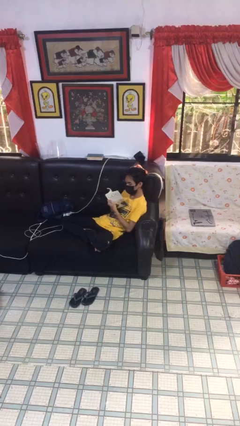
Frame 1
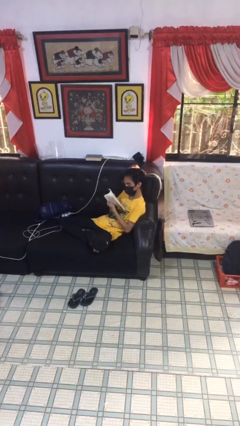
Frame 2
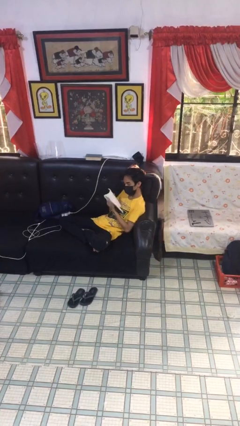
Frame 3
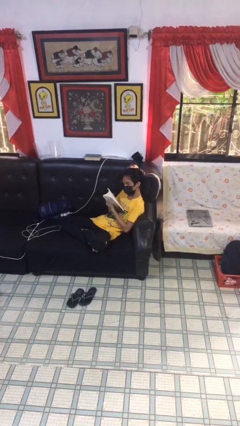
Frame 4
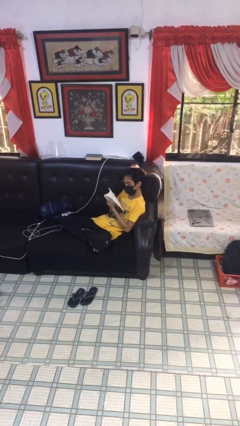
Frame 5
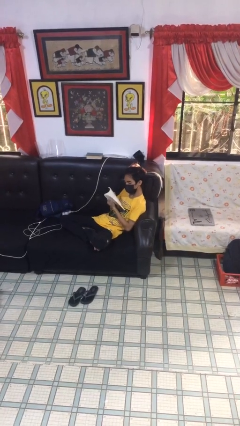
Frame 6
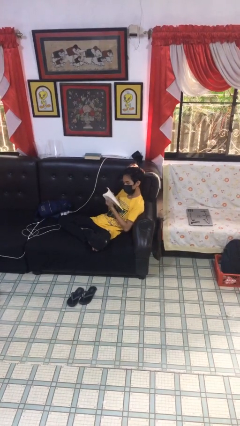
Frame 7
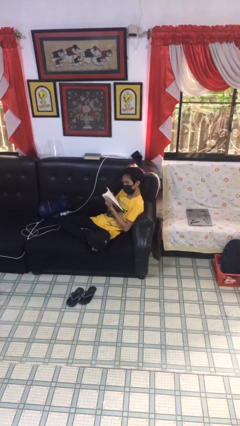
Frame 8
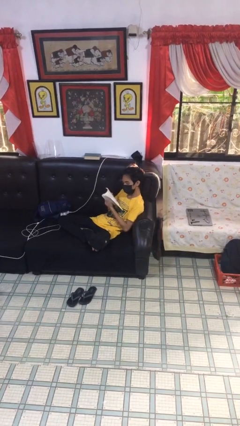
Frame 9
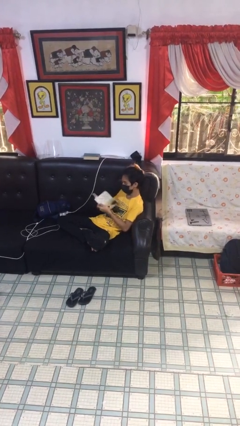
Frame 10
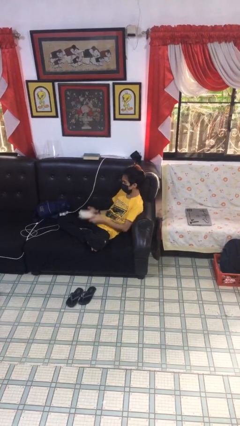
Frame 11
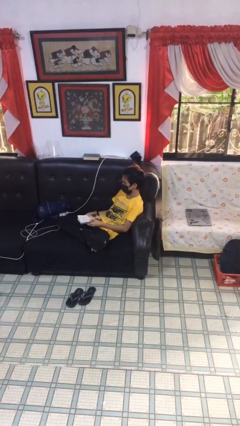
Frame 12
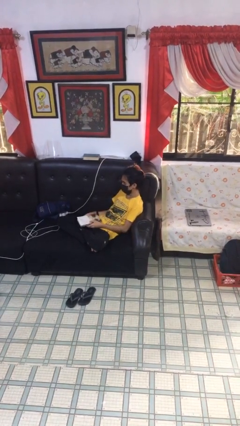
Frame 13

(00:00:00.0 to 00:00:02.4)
person reads document

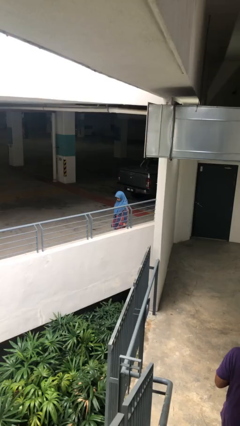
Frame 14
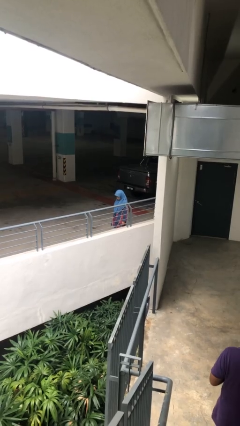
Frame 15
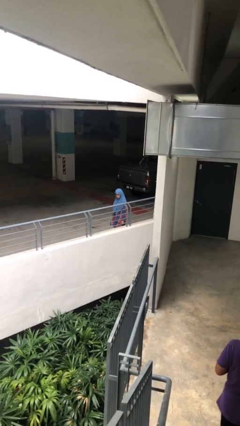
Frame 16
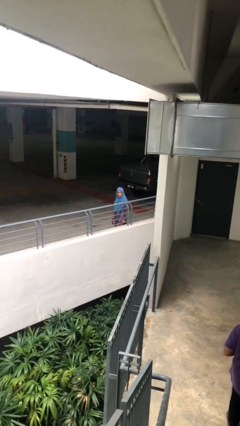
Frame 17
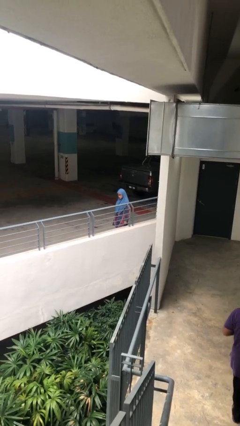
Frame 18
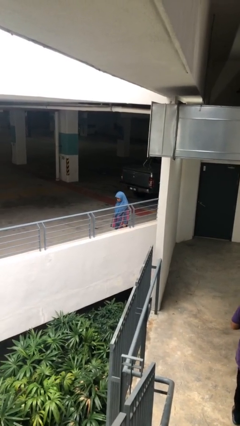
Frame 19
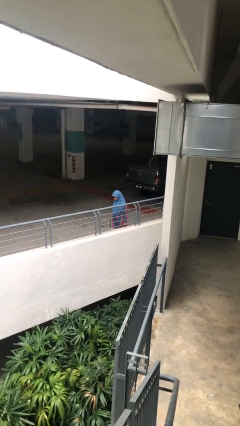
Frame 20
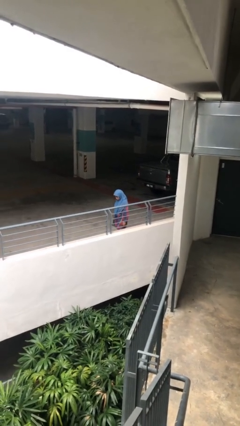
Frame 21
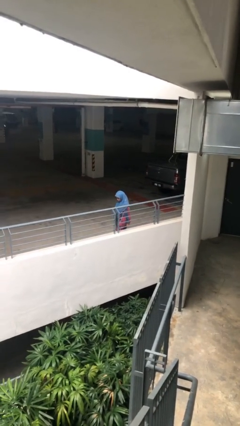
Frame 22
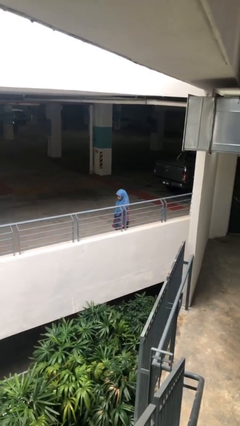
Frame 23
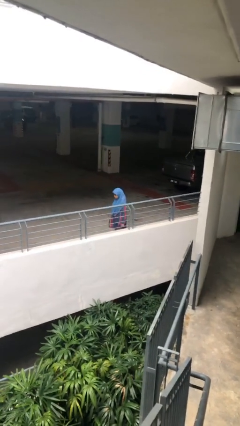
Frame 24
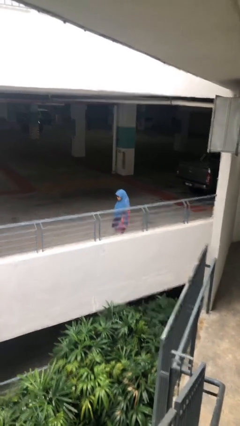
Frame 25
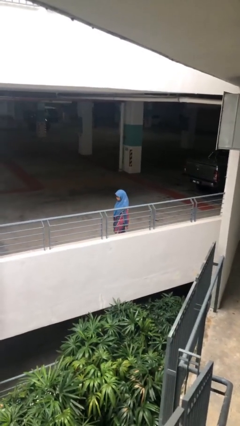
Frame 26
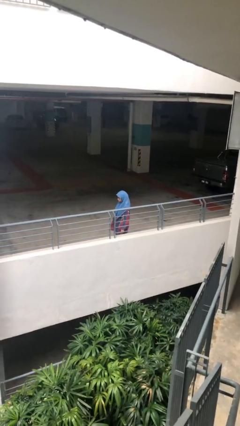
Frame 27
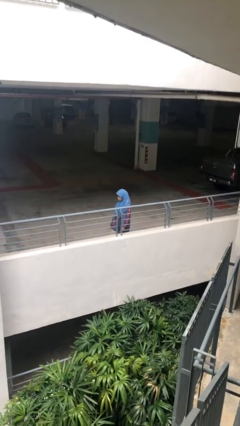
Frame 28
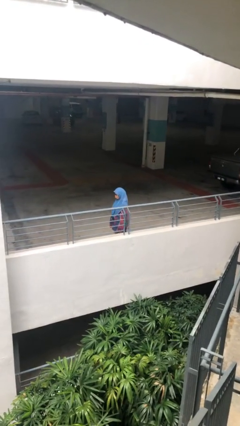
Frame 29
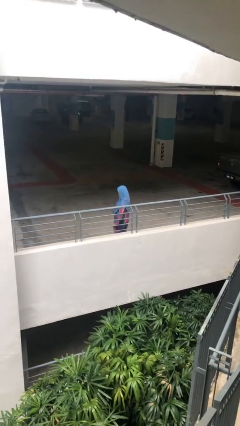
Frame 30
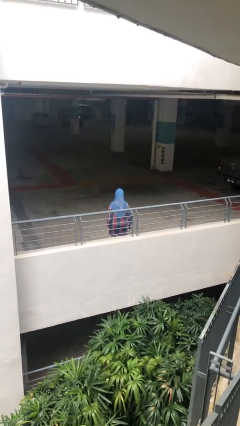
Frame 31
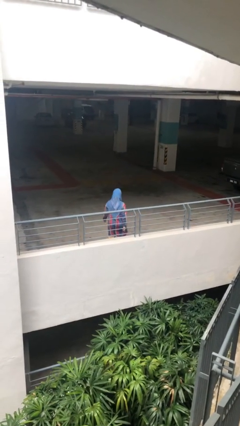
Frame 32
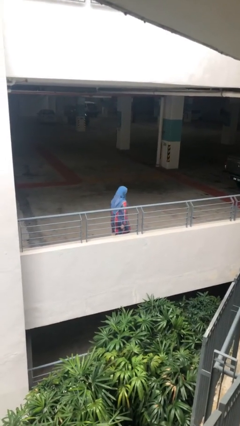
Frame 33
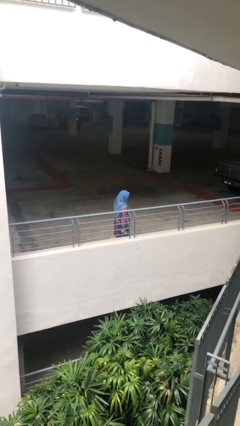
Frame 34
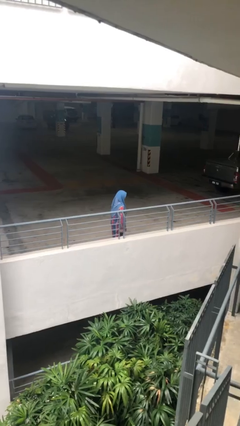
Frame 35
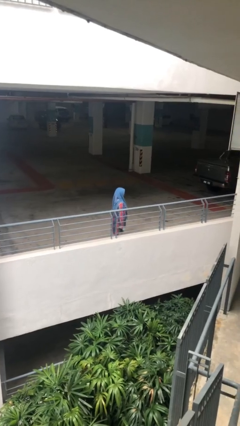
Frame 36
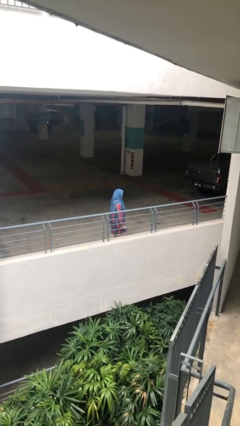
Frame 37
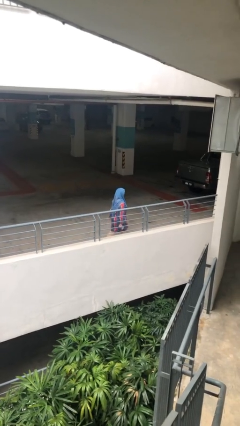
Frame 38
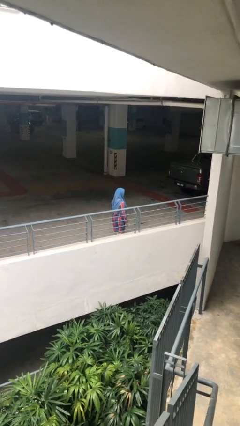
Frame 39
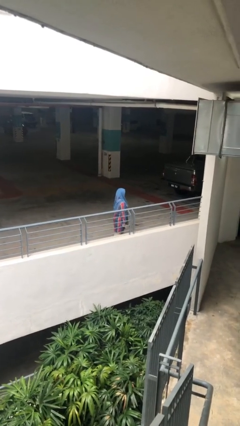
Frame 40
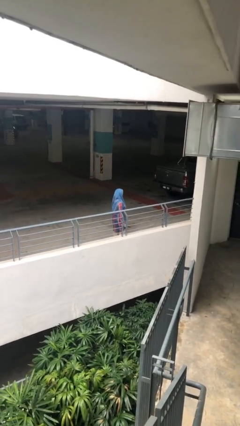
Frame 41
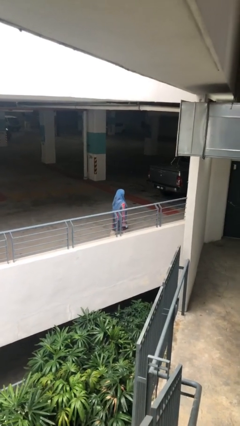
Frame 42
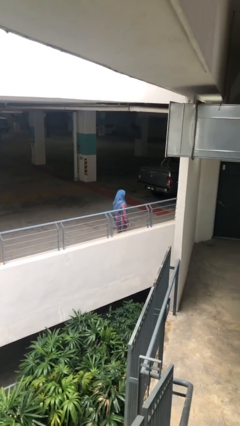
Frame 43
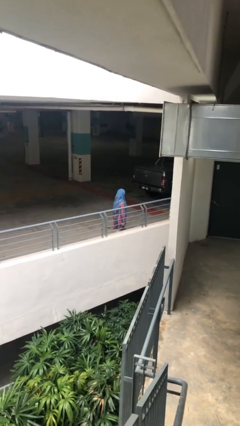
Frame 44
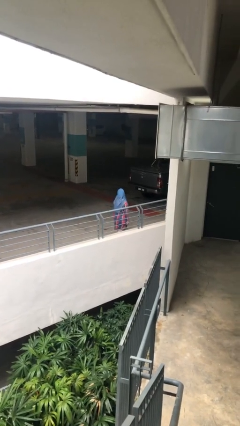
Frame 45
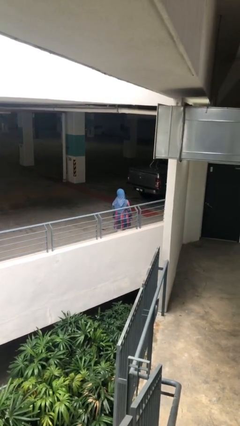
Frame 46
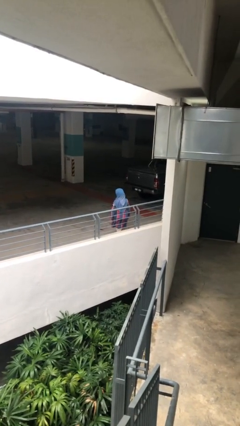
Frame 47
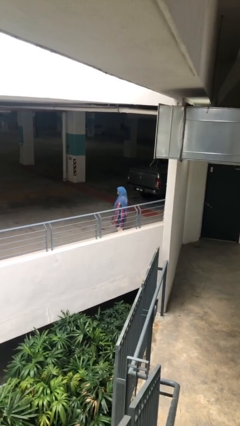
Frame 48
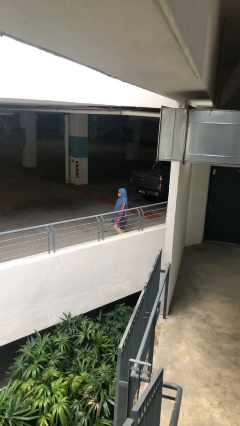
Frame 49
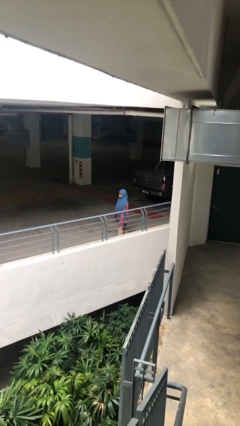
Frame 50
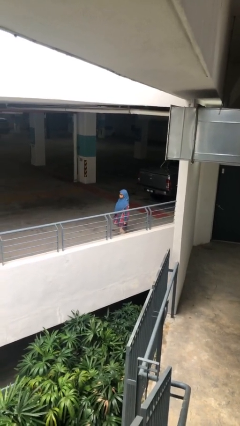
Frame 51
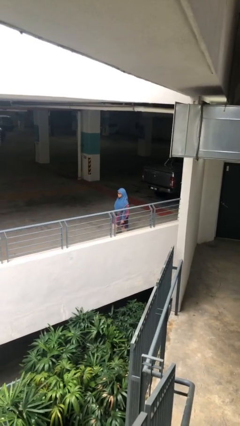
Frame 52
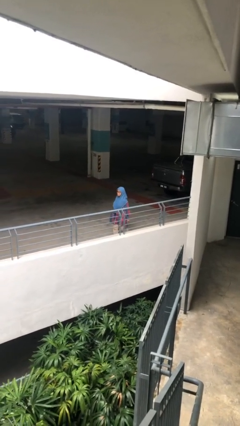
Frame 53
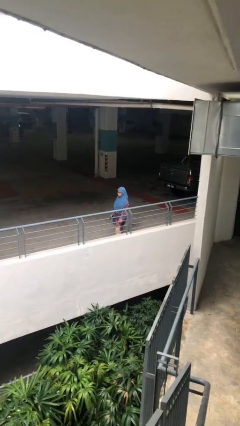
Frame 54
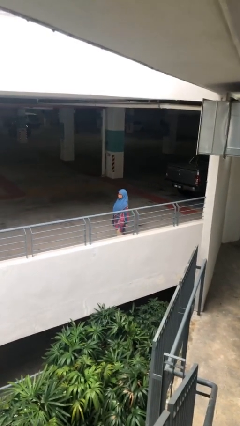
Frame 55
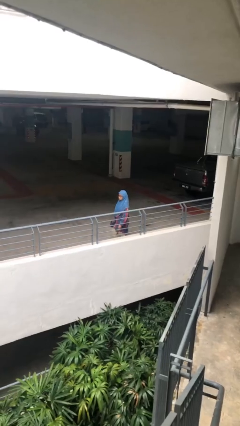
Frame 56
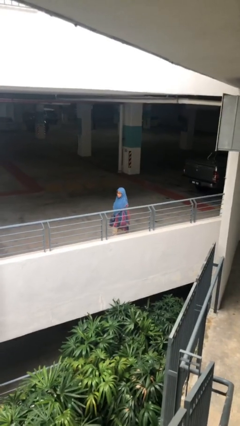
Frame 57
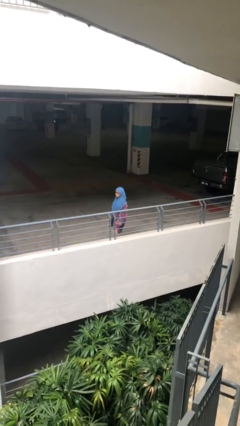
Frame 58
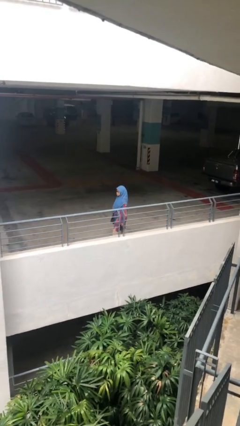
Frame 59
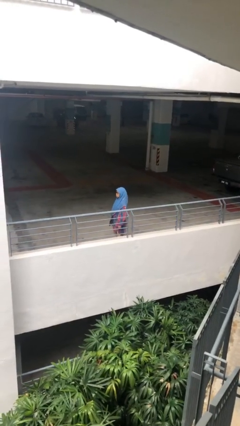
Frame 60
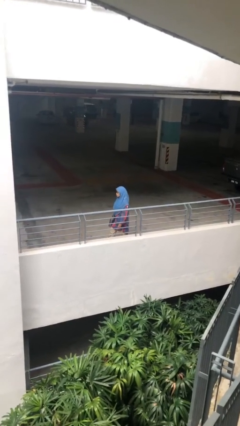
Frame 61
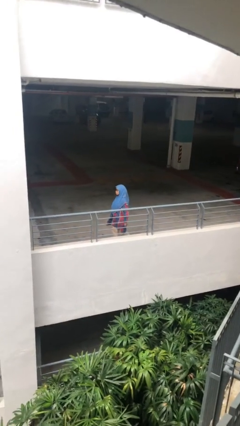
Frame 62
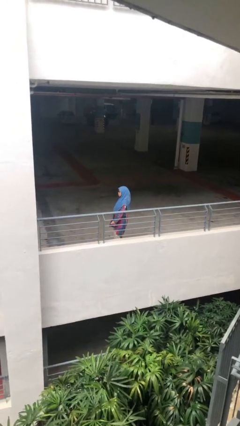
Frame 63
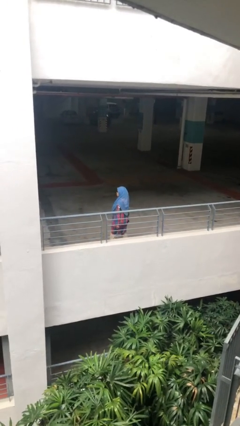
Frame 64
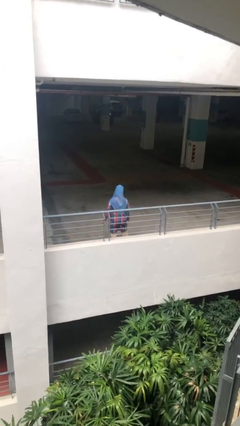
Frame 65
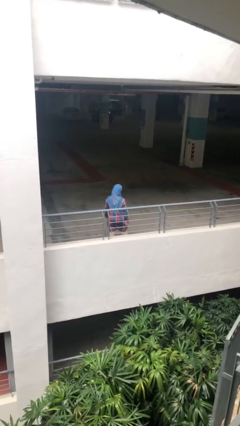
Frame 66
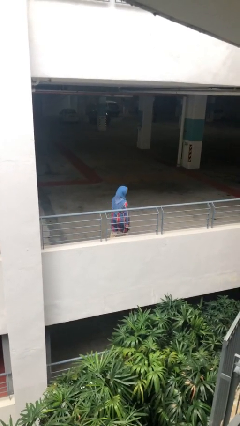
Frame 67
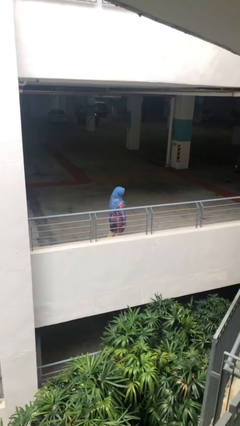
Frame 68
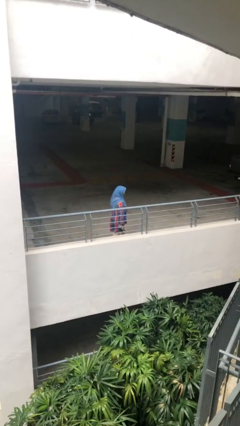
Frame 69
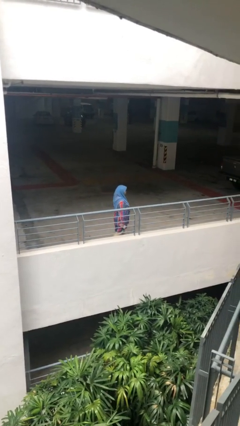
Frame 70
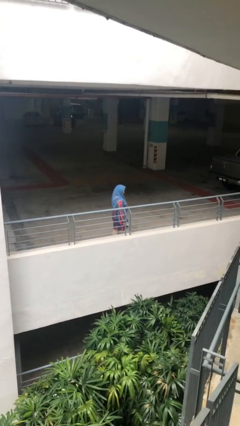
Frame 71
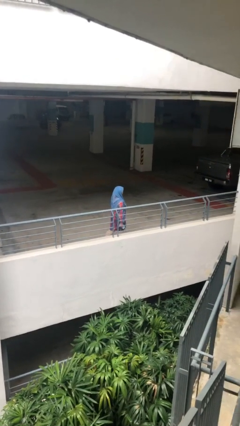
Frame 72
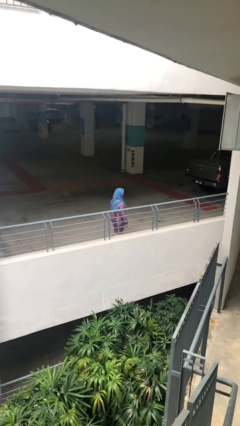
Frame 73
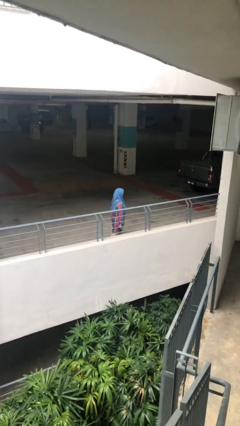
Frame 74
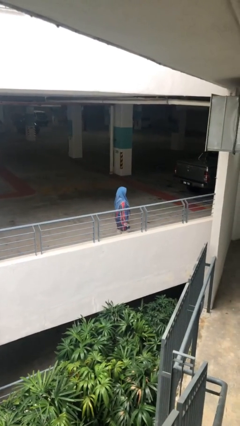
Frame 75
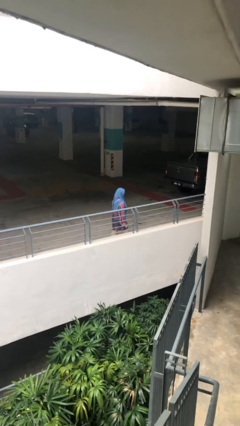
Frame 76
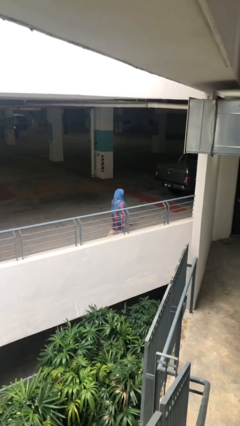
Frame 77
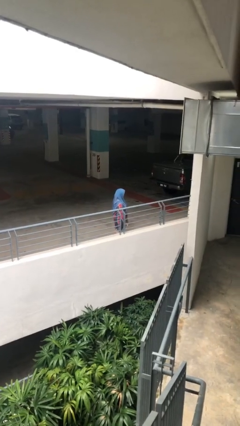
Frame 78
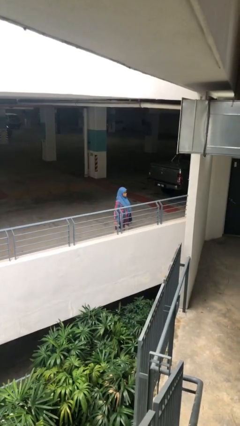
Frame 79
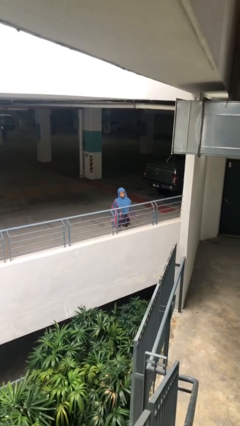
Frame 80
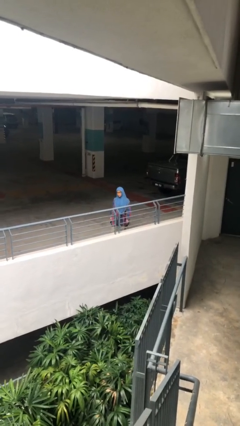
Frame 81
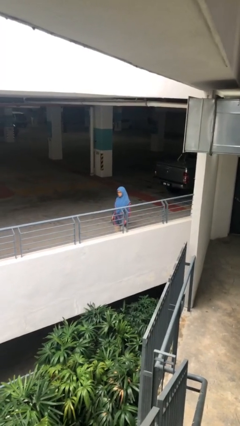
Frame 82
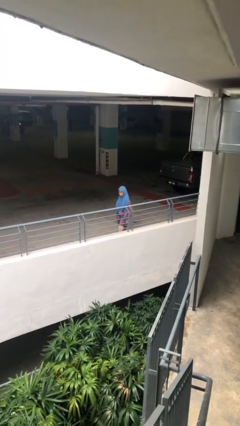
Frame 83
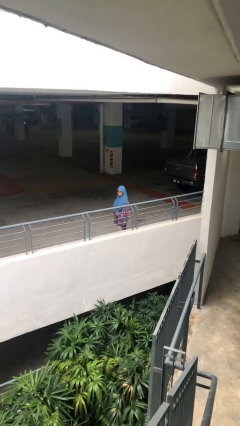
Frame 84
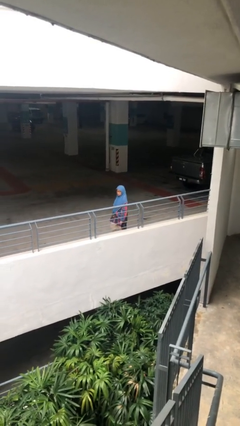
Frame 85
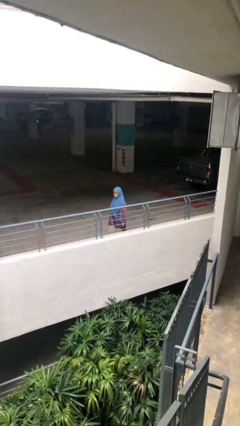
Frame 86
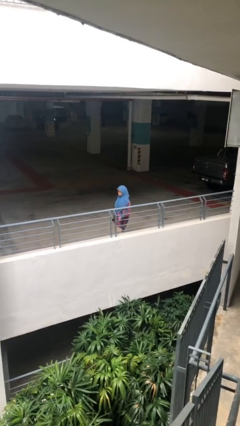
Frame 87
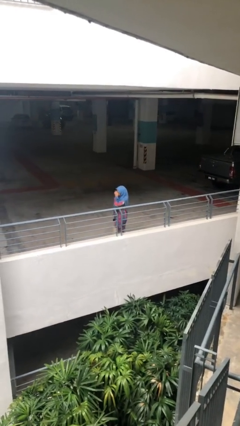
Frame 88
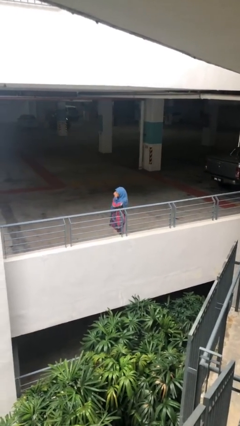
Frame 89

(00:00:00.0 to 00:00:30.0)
person walks

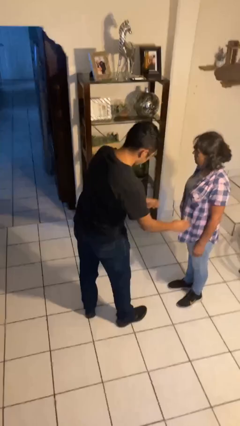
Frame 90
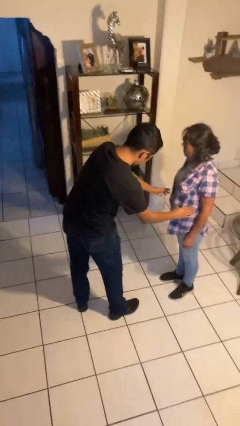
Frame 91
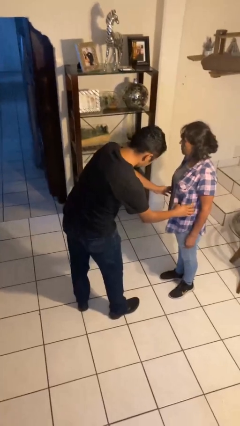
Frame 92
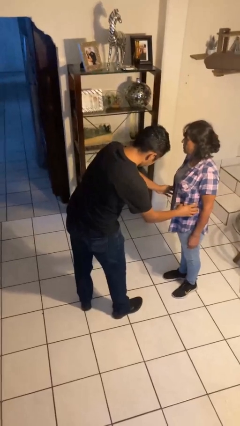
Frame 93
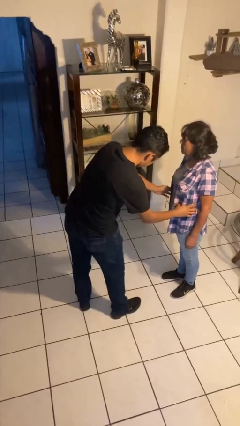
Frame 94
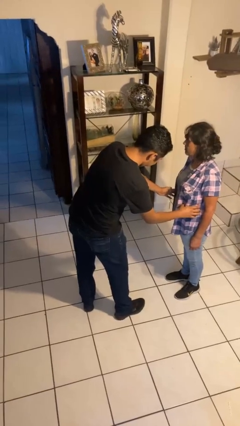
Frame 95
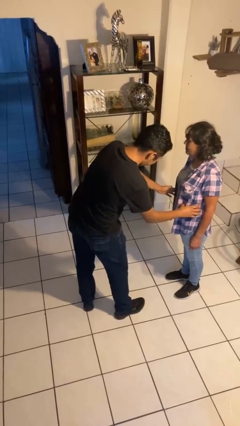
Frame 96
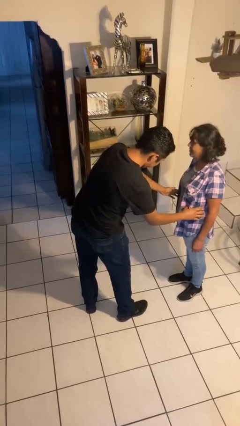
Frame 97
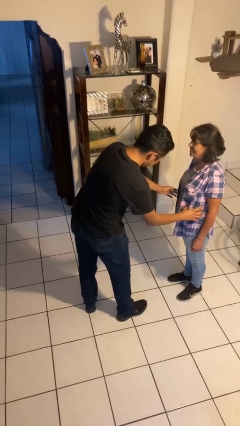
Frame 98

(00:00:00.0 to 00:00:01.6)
person tickles person
